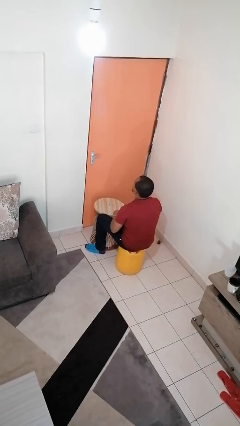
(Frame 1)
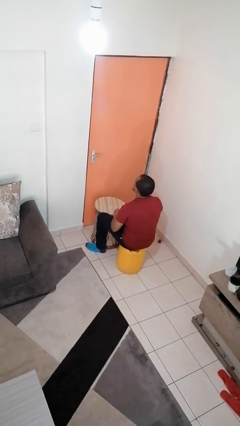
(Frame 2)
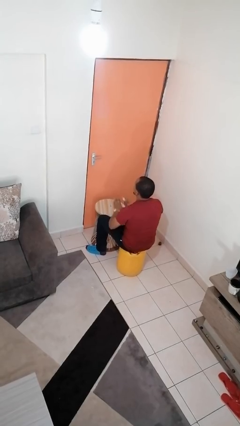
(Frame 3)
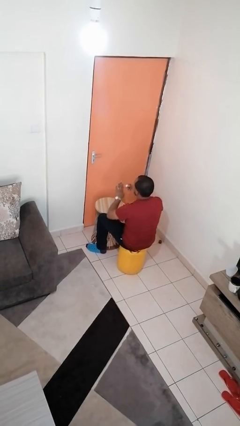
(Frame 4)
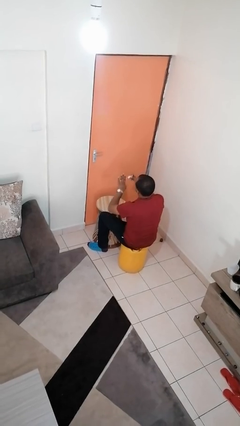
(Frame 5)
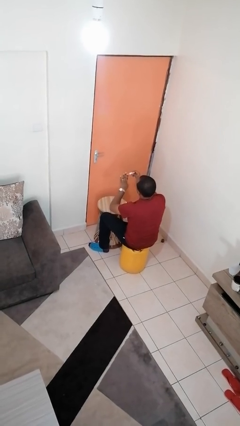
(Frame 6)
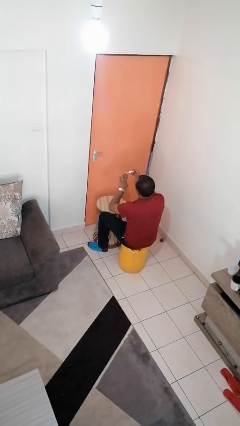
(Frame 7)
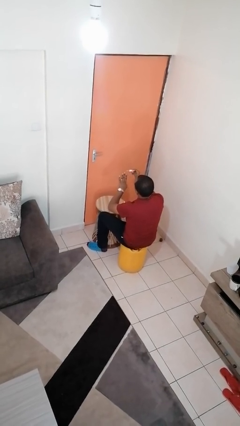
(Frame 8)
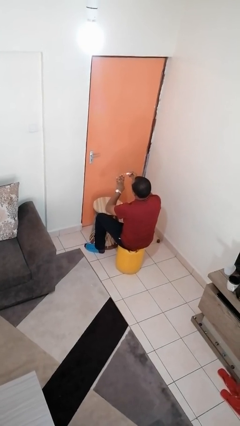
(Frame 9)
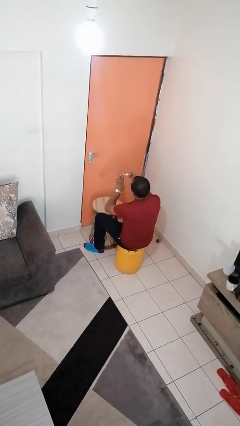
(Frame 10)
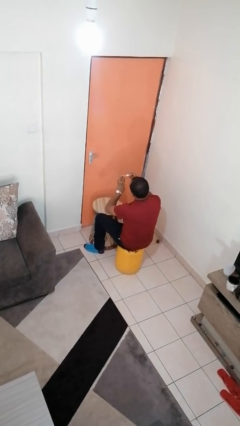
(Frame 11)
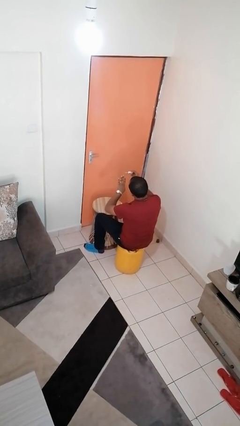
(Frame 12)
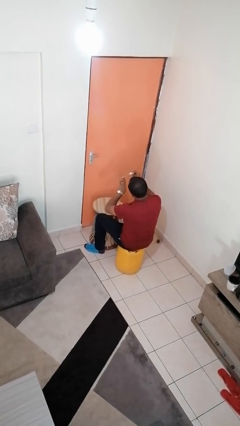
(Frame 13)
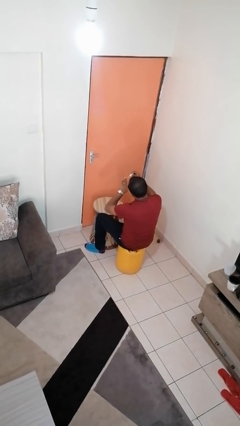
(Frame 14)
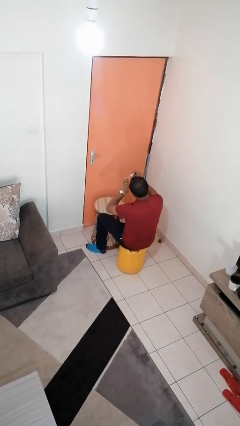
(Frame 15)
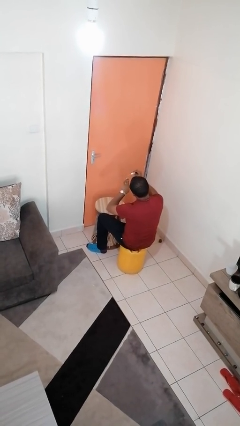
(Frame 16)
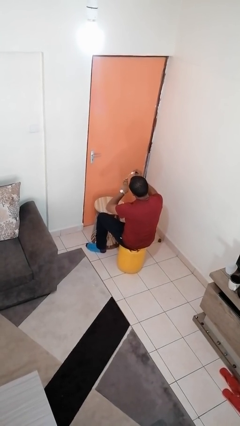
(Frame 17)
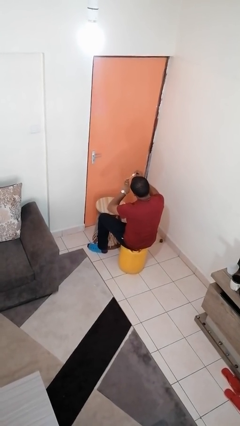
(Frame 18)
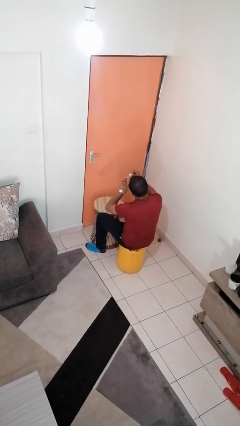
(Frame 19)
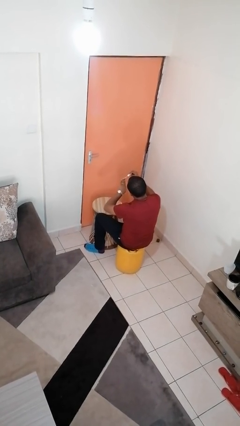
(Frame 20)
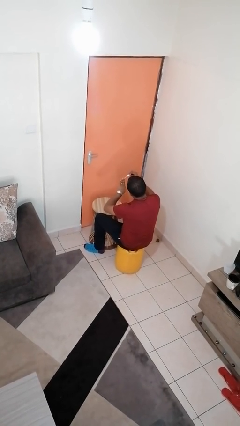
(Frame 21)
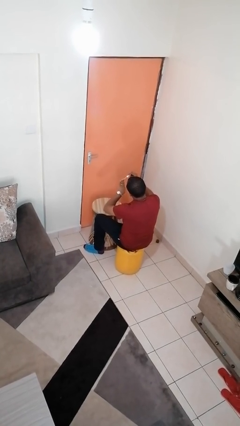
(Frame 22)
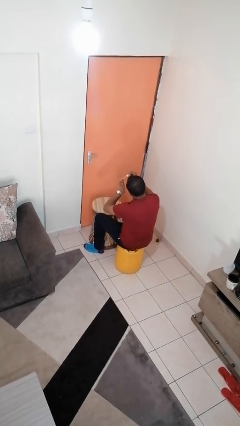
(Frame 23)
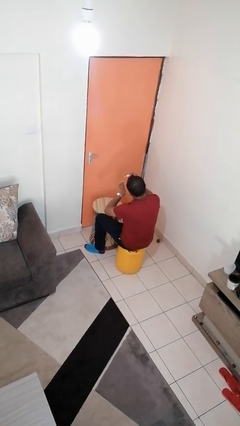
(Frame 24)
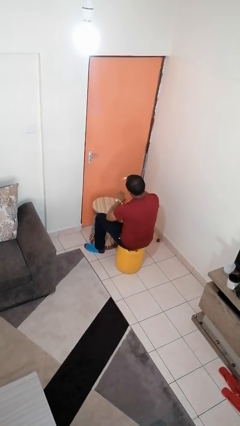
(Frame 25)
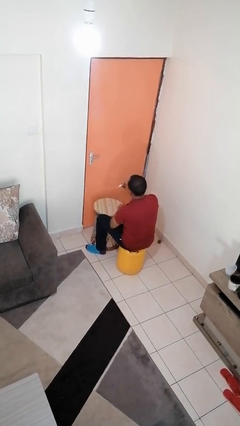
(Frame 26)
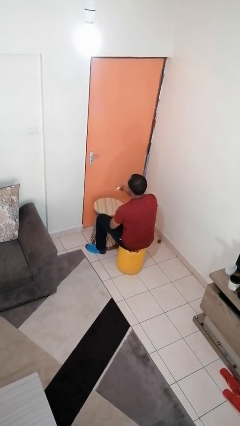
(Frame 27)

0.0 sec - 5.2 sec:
person paints fingernails

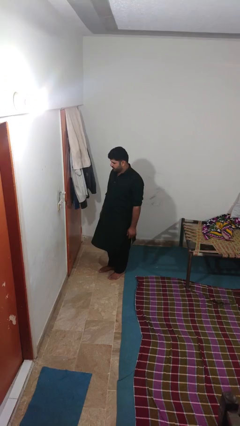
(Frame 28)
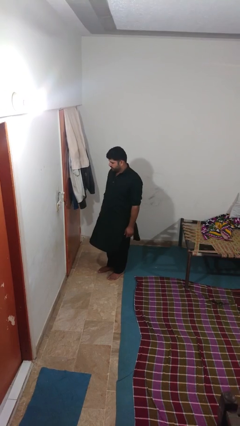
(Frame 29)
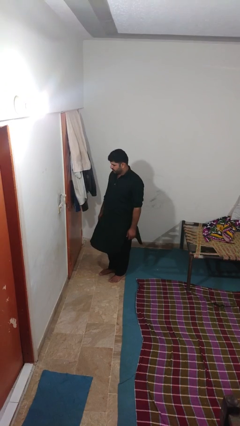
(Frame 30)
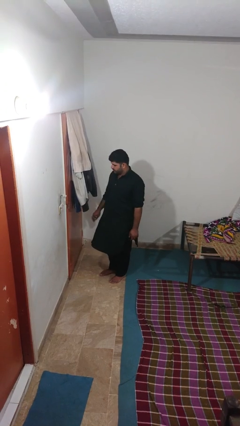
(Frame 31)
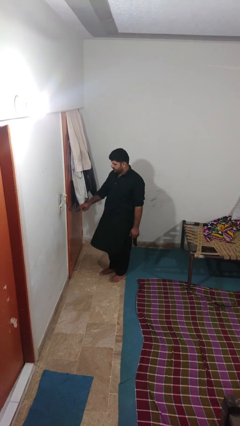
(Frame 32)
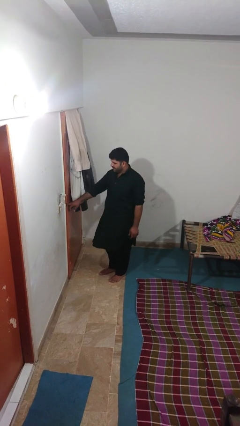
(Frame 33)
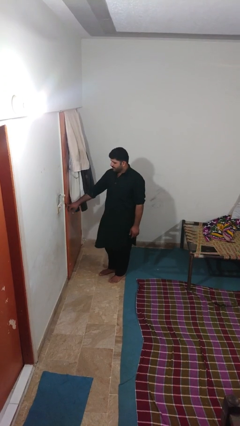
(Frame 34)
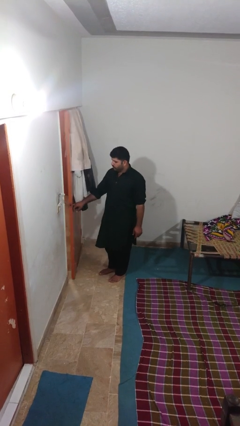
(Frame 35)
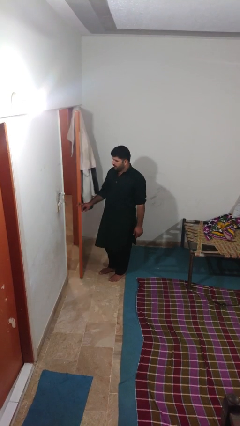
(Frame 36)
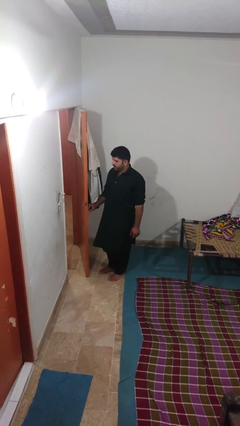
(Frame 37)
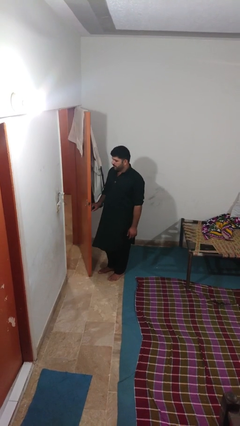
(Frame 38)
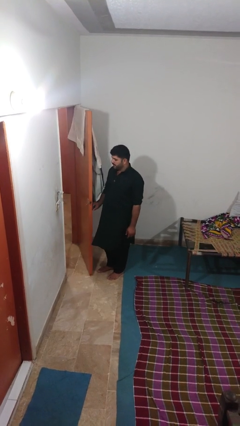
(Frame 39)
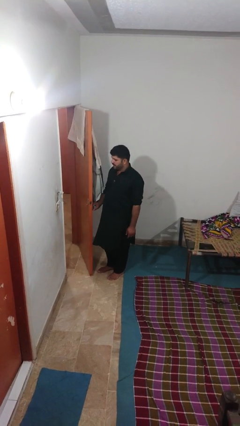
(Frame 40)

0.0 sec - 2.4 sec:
person opens facility door

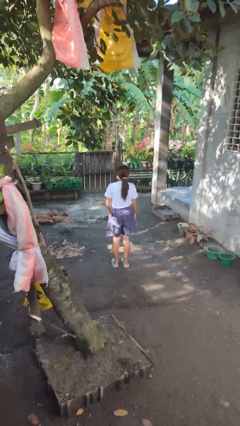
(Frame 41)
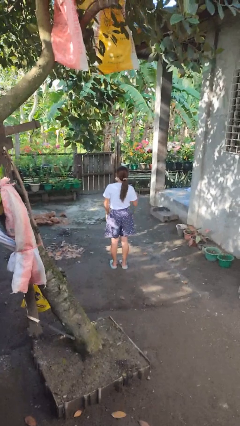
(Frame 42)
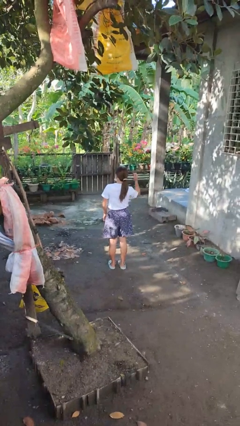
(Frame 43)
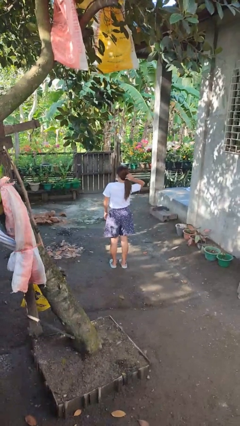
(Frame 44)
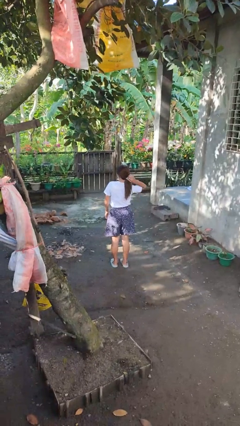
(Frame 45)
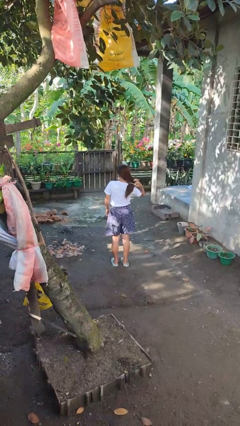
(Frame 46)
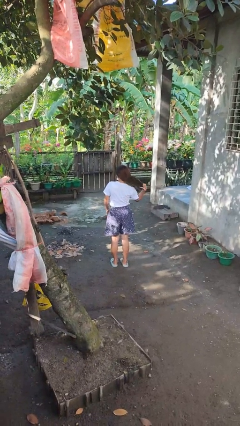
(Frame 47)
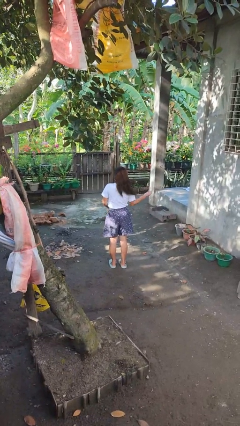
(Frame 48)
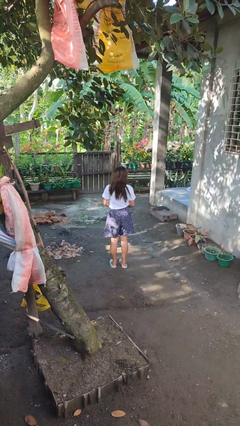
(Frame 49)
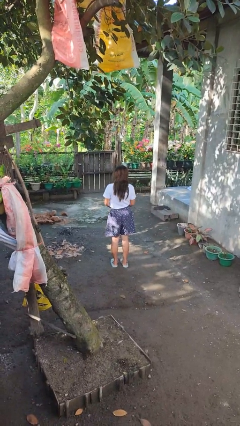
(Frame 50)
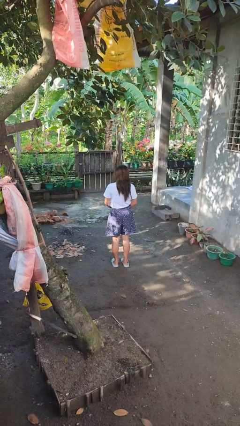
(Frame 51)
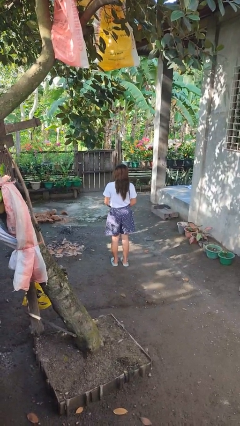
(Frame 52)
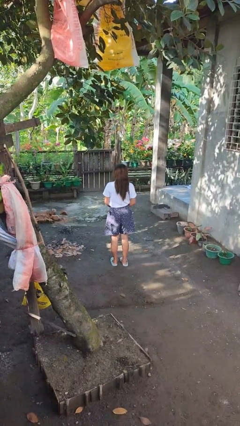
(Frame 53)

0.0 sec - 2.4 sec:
person takes off hairtie

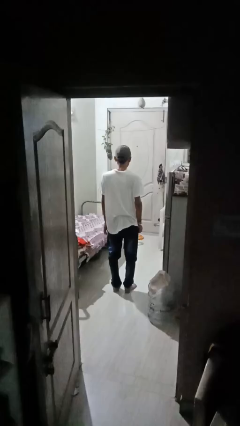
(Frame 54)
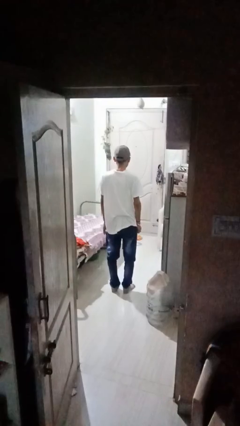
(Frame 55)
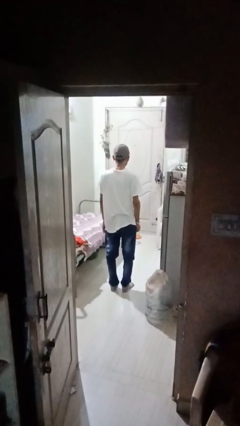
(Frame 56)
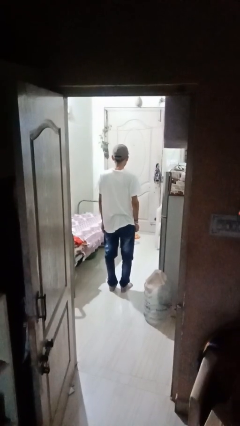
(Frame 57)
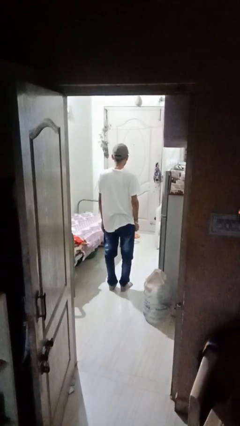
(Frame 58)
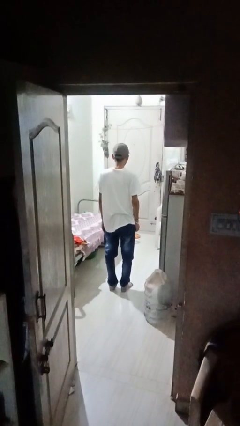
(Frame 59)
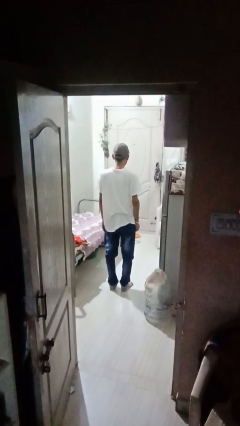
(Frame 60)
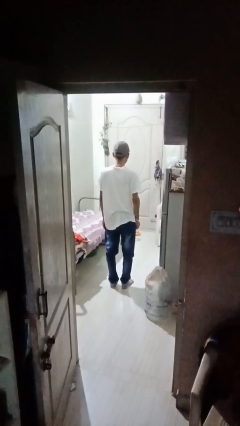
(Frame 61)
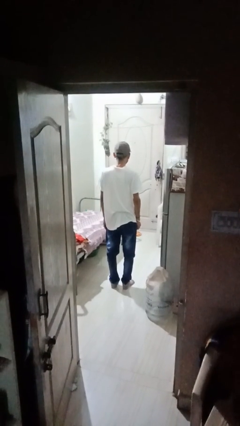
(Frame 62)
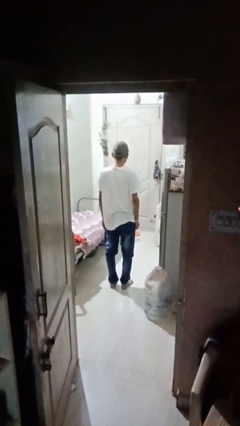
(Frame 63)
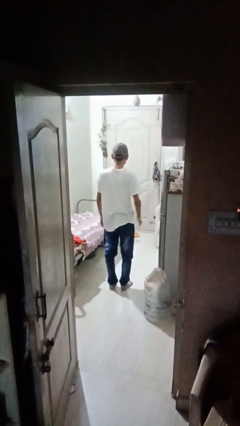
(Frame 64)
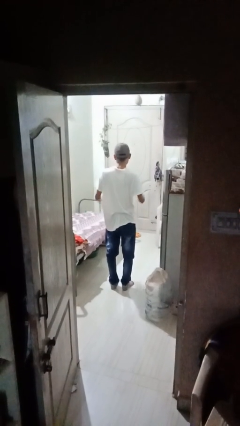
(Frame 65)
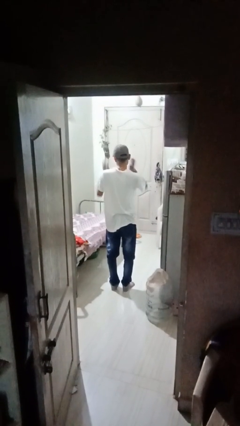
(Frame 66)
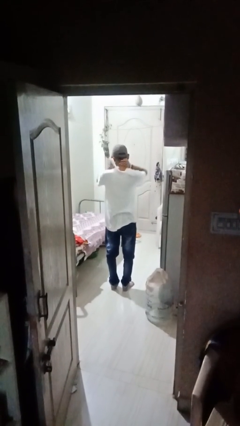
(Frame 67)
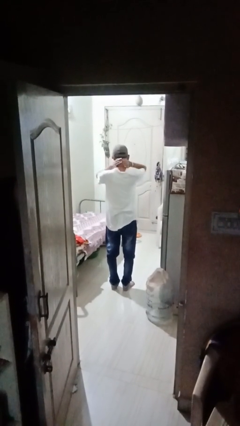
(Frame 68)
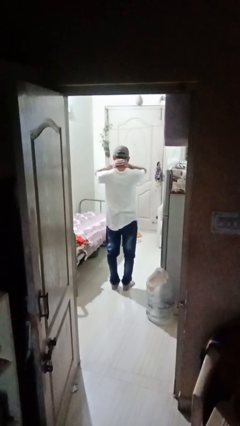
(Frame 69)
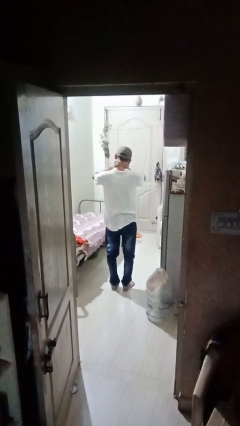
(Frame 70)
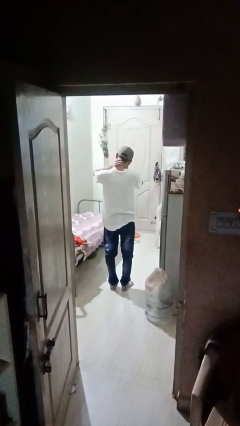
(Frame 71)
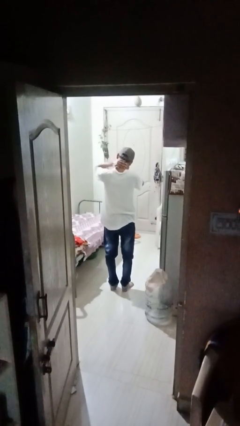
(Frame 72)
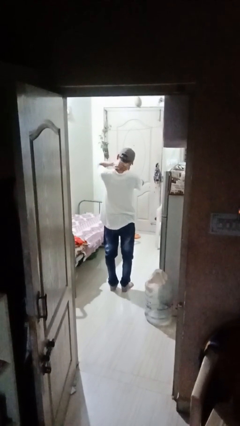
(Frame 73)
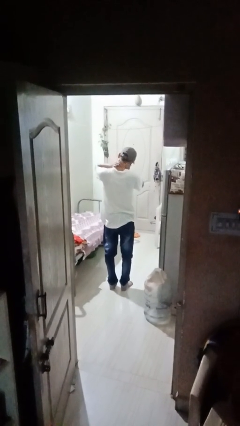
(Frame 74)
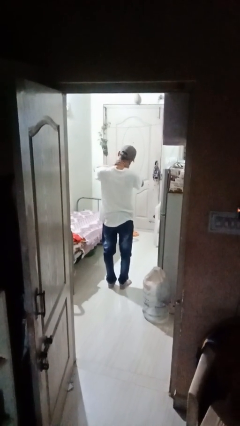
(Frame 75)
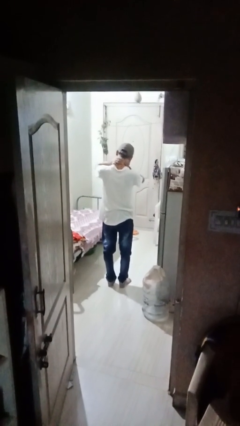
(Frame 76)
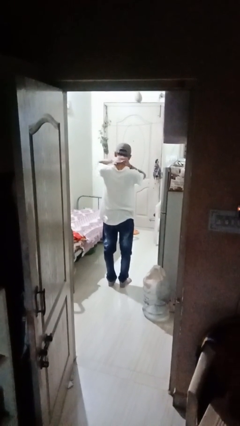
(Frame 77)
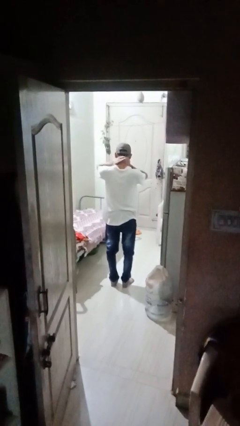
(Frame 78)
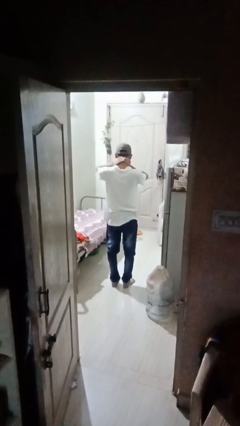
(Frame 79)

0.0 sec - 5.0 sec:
person rubs neck

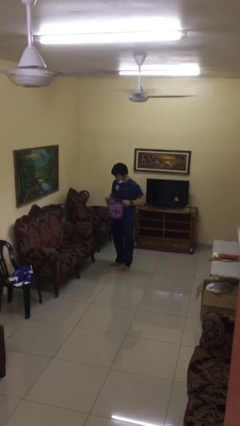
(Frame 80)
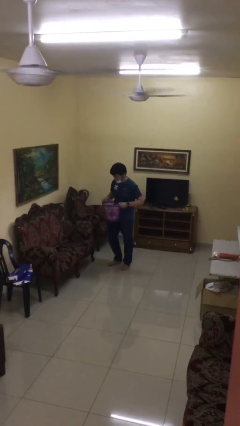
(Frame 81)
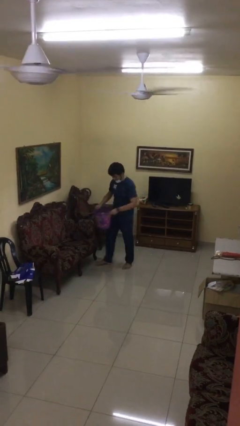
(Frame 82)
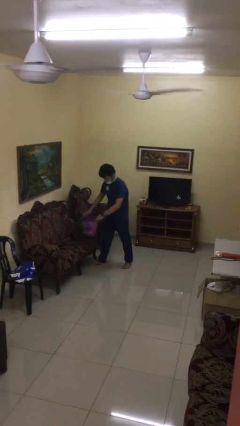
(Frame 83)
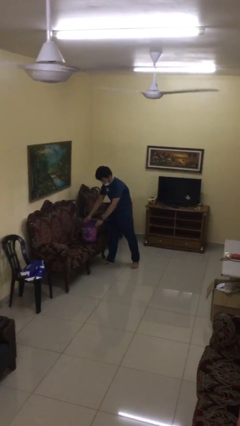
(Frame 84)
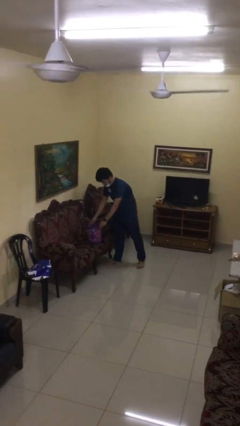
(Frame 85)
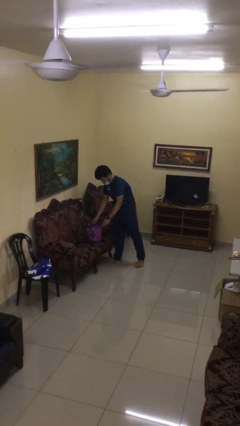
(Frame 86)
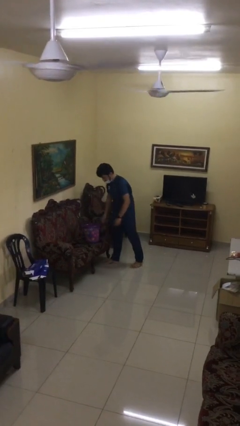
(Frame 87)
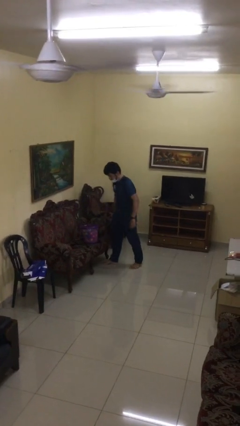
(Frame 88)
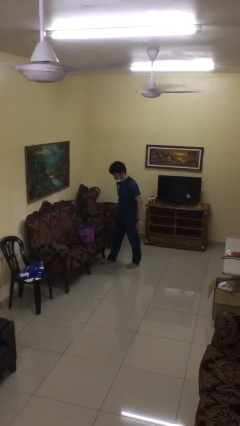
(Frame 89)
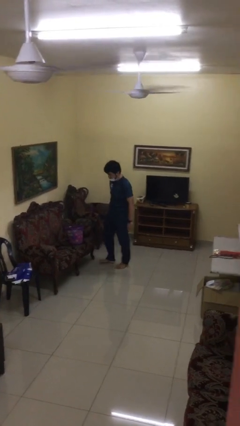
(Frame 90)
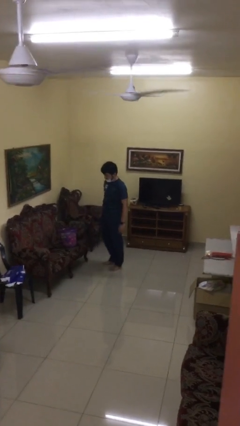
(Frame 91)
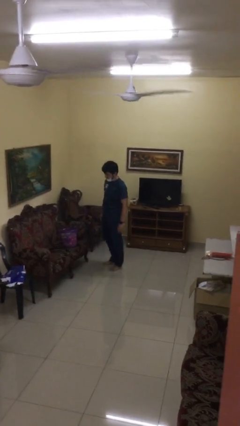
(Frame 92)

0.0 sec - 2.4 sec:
person puts down object on couch
